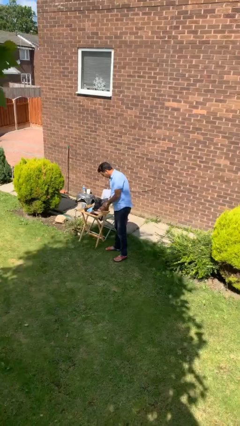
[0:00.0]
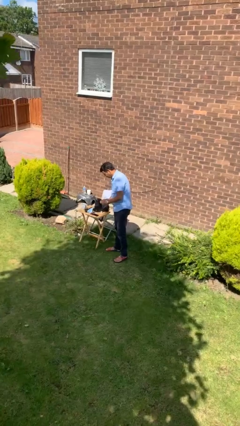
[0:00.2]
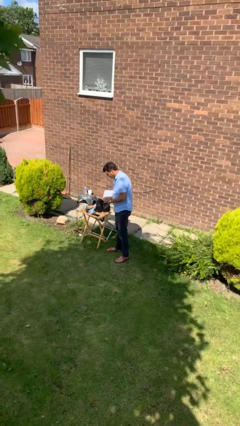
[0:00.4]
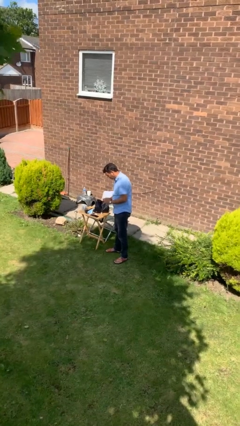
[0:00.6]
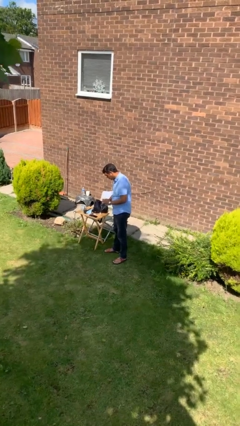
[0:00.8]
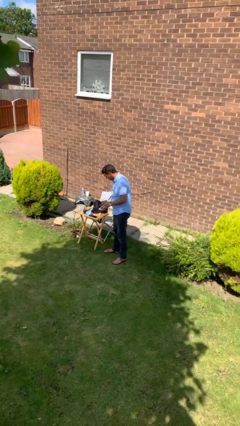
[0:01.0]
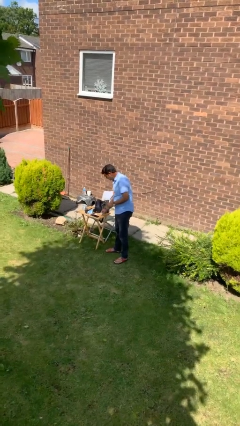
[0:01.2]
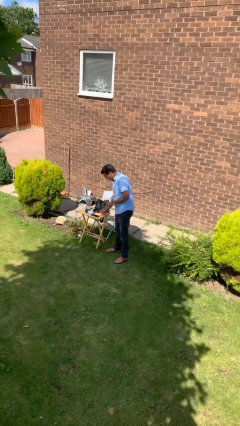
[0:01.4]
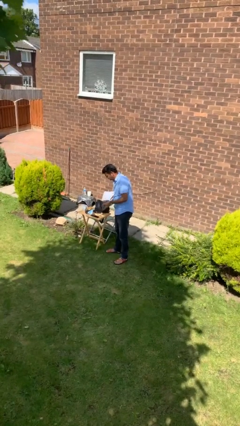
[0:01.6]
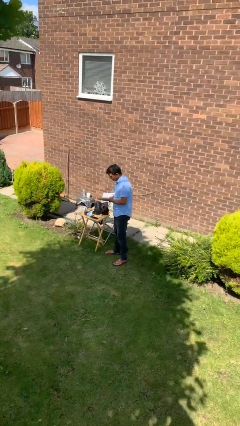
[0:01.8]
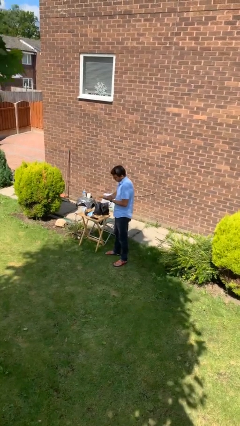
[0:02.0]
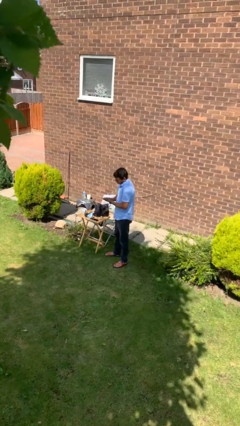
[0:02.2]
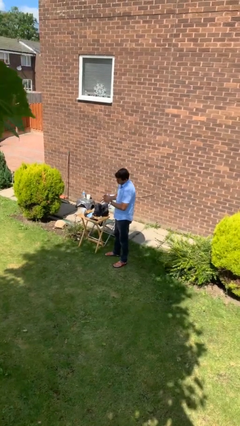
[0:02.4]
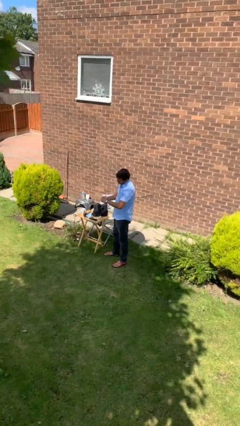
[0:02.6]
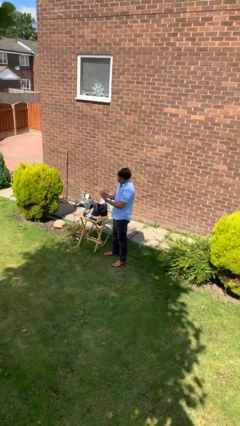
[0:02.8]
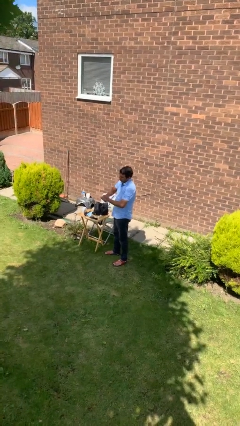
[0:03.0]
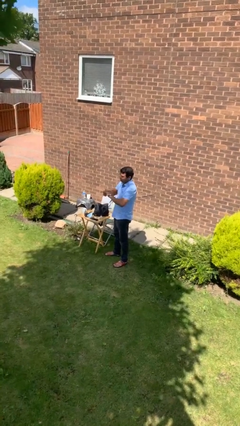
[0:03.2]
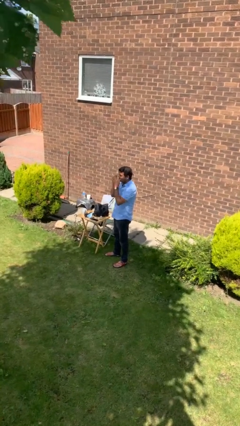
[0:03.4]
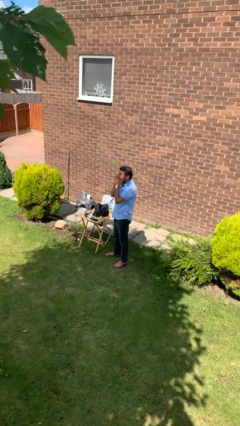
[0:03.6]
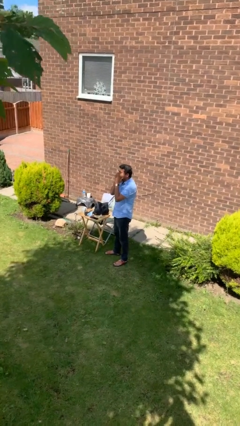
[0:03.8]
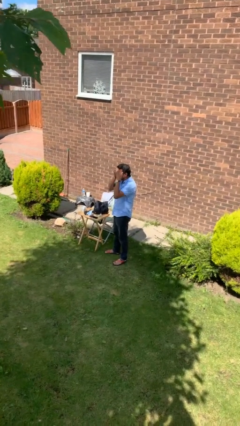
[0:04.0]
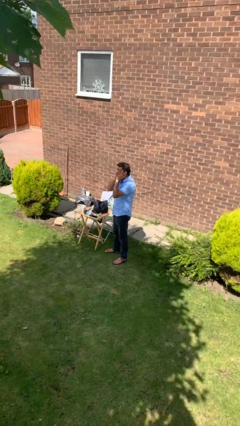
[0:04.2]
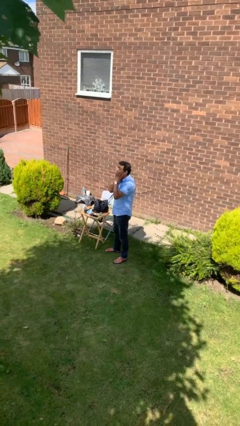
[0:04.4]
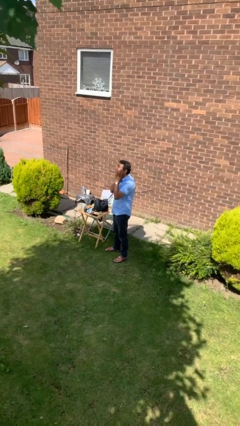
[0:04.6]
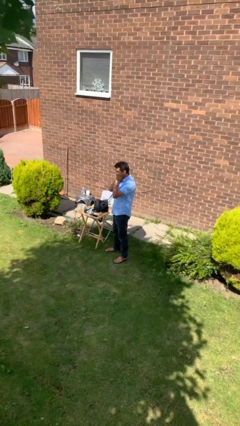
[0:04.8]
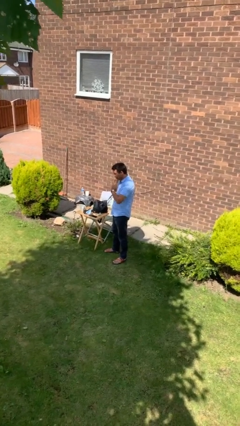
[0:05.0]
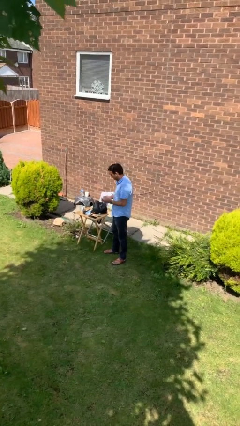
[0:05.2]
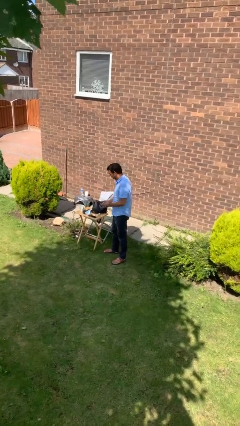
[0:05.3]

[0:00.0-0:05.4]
person applies facial moisturizer

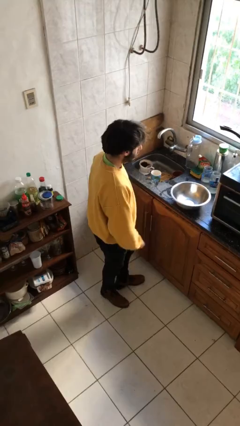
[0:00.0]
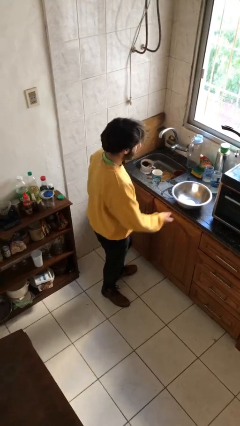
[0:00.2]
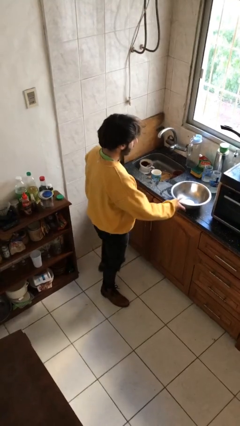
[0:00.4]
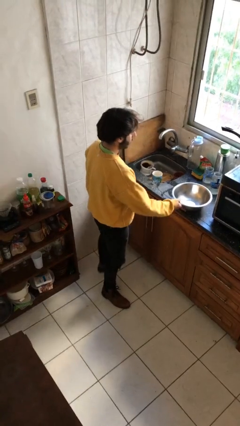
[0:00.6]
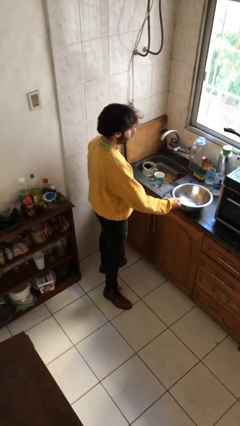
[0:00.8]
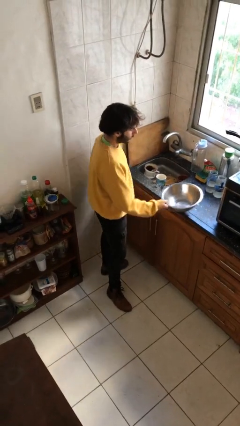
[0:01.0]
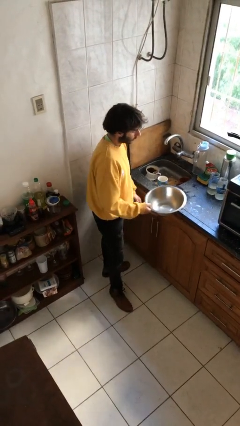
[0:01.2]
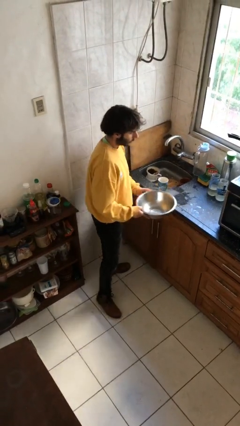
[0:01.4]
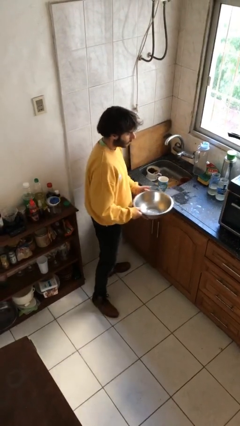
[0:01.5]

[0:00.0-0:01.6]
person picks up object from countertop

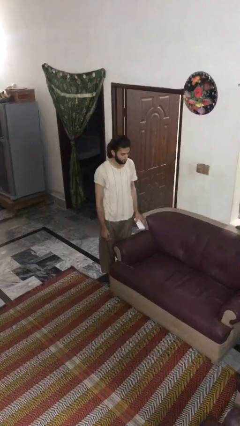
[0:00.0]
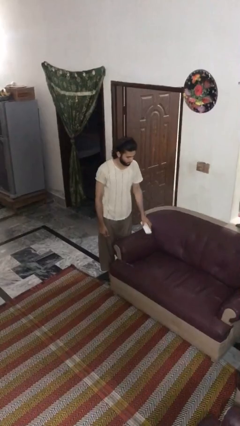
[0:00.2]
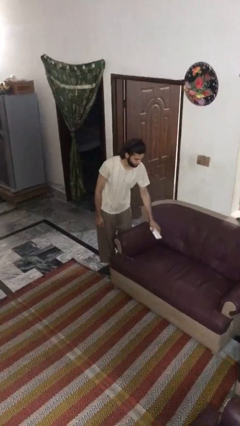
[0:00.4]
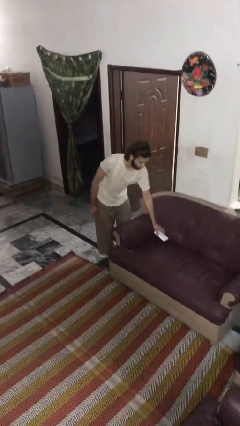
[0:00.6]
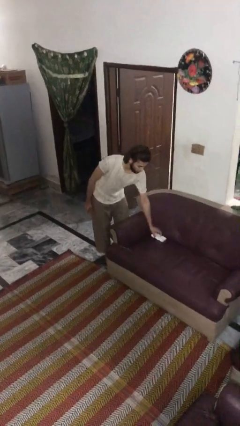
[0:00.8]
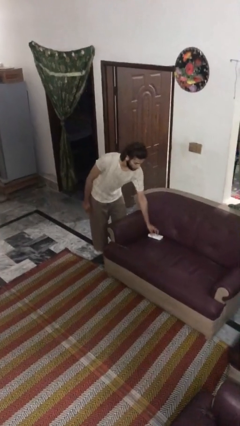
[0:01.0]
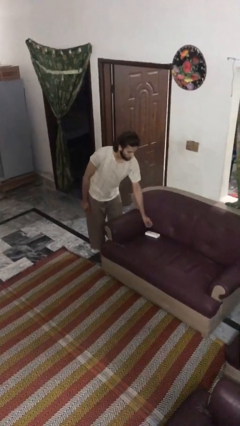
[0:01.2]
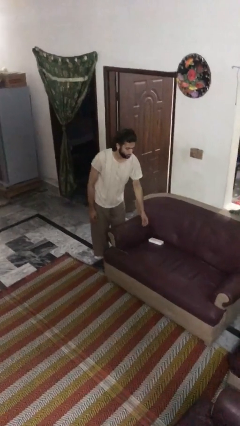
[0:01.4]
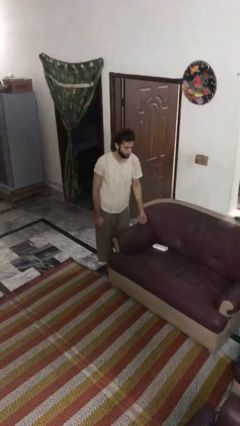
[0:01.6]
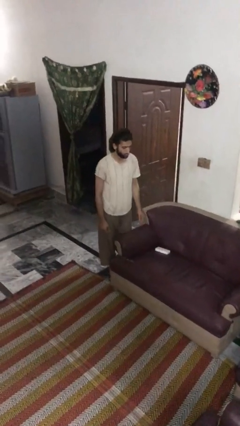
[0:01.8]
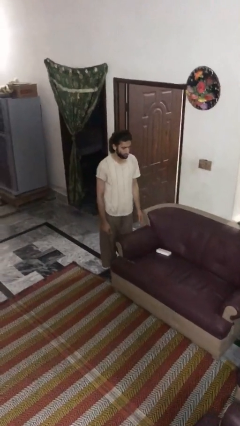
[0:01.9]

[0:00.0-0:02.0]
person puts down object on couch

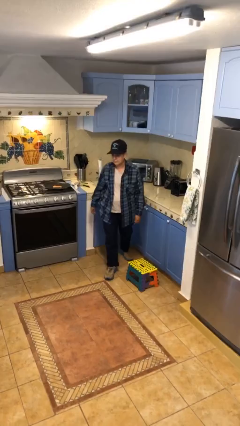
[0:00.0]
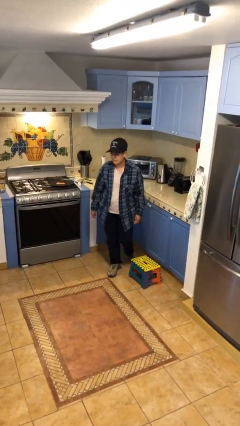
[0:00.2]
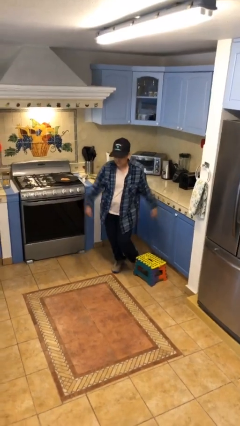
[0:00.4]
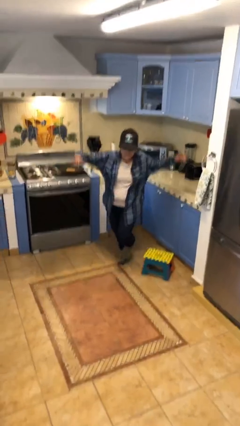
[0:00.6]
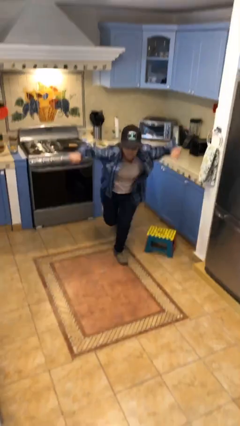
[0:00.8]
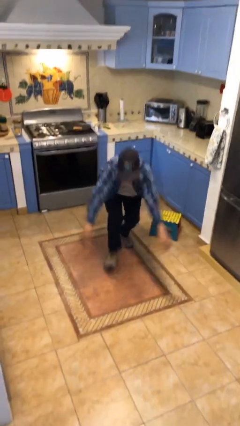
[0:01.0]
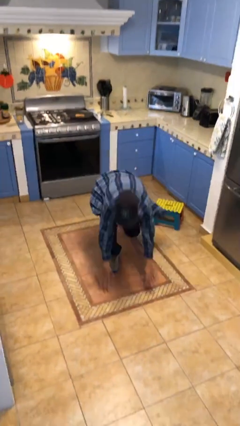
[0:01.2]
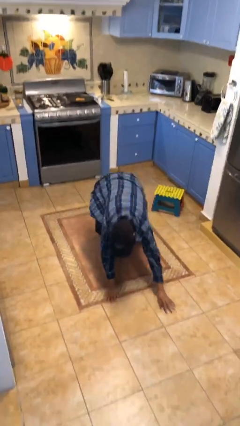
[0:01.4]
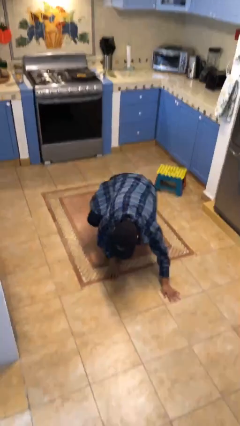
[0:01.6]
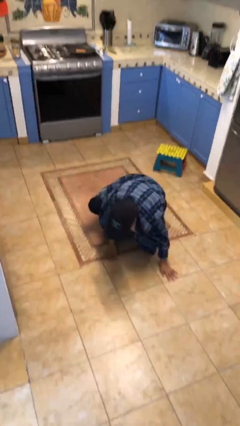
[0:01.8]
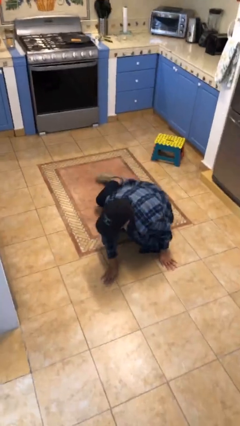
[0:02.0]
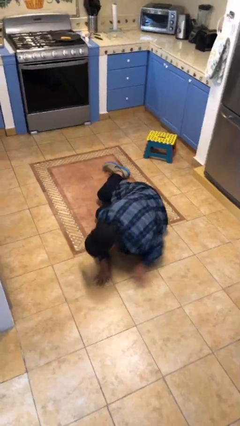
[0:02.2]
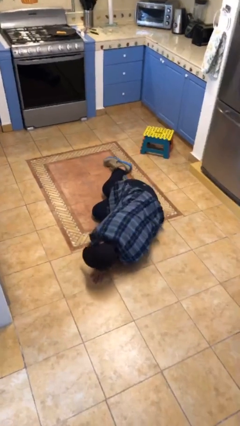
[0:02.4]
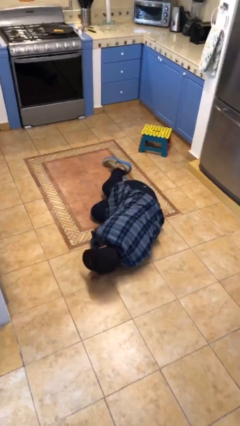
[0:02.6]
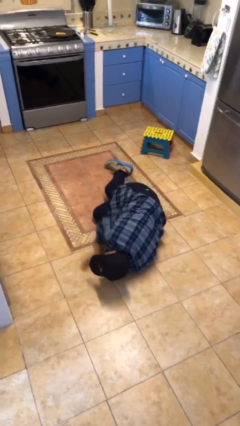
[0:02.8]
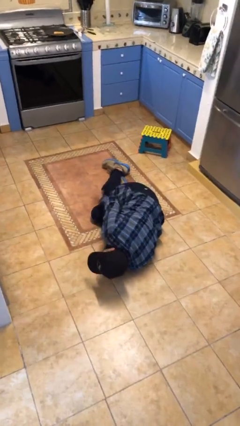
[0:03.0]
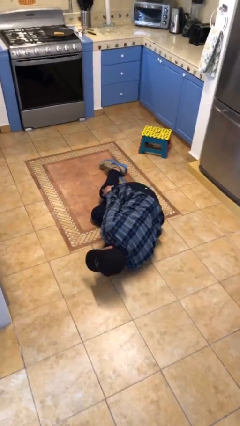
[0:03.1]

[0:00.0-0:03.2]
person trips on object on floor

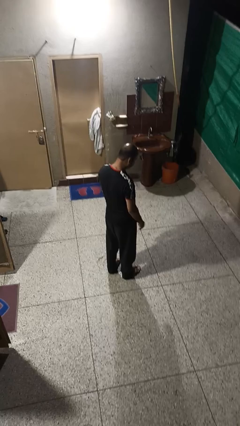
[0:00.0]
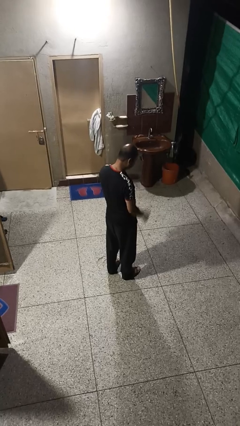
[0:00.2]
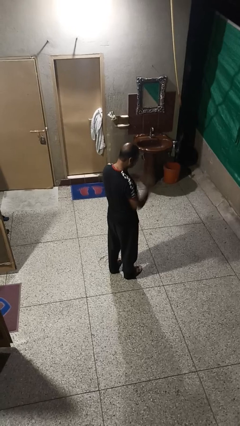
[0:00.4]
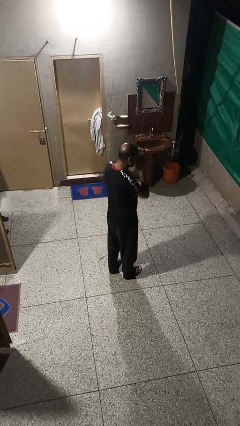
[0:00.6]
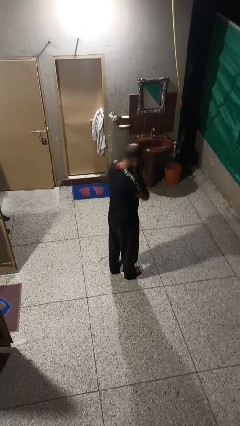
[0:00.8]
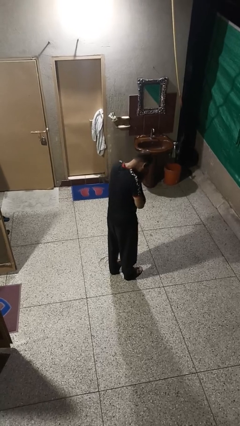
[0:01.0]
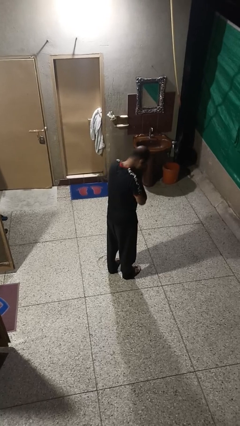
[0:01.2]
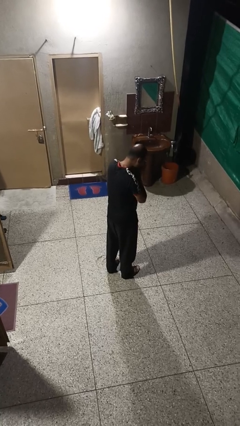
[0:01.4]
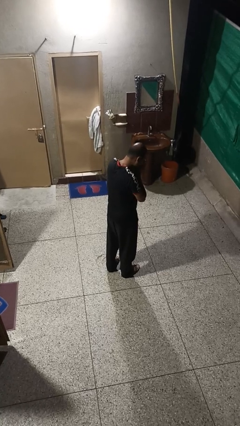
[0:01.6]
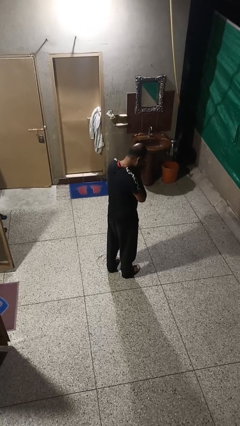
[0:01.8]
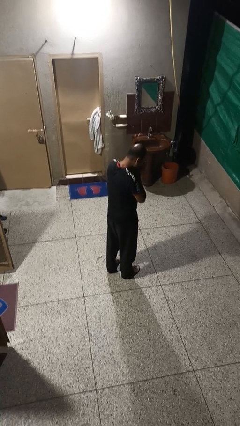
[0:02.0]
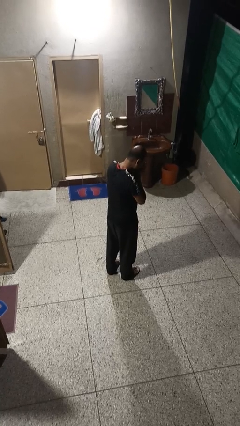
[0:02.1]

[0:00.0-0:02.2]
person sneezes into hand

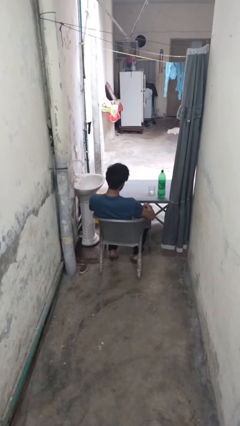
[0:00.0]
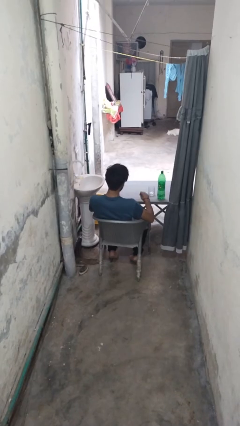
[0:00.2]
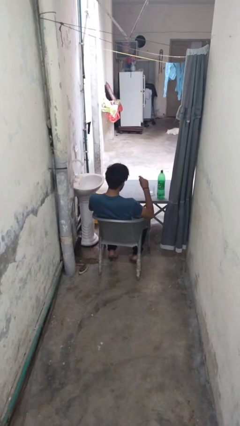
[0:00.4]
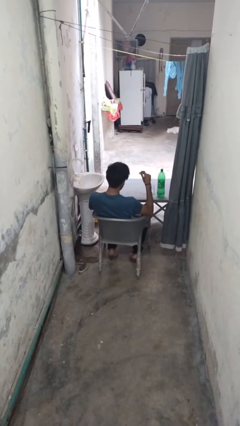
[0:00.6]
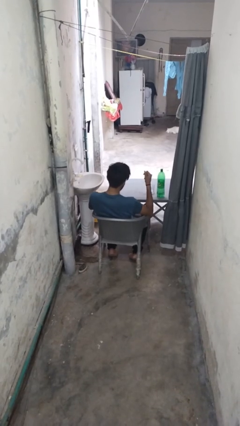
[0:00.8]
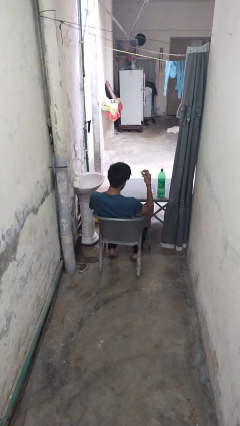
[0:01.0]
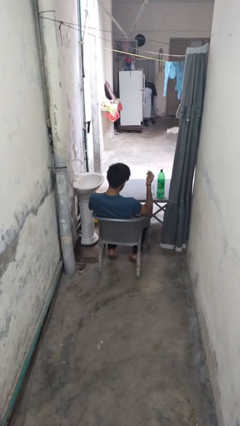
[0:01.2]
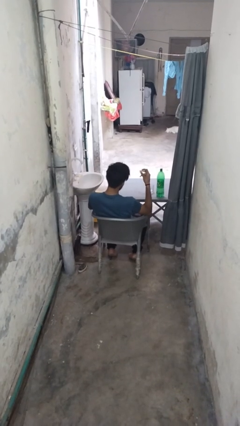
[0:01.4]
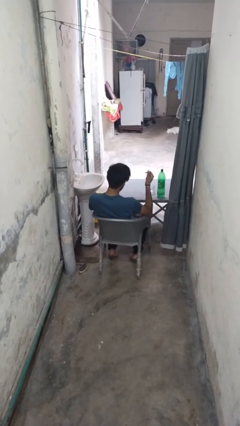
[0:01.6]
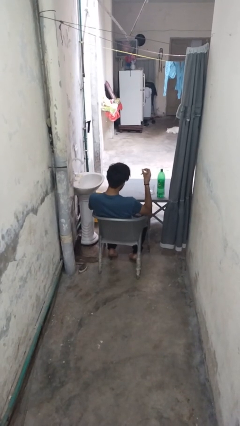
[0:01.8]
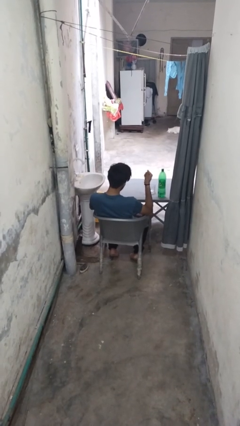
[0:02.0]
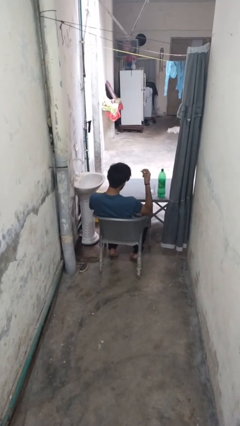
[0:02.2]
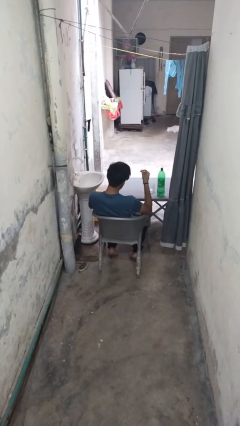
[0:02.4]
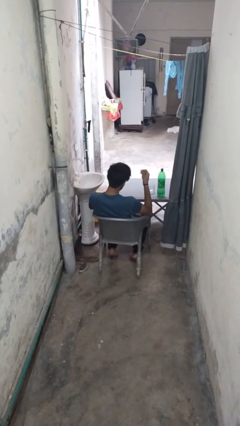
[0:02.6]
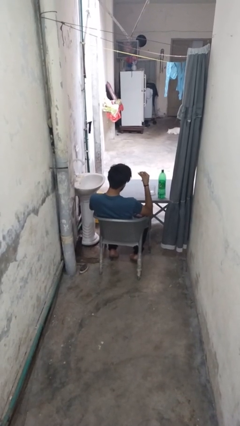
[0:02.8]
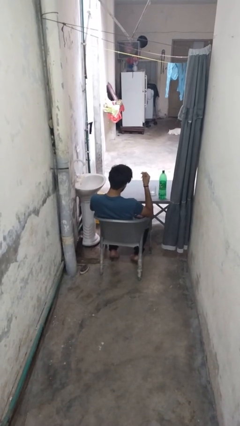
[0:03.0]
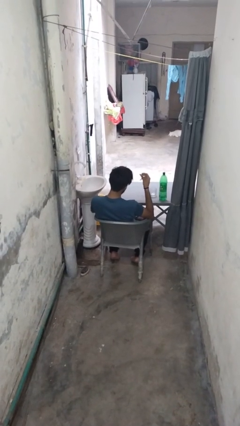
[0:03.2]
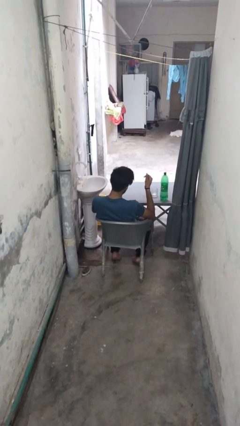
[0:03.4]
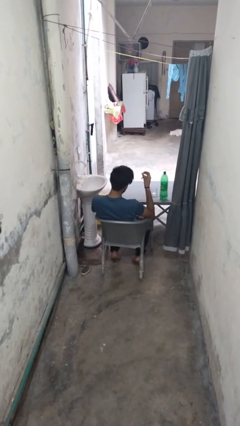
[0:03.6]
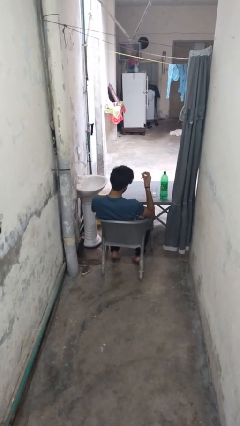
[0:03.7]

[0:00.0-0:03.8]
person snaps fingers
